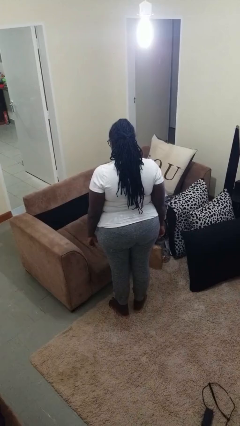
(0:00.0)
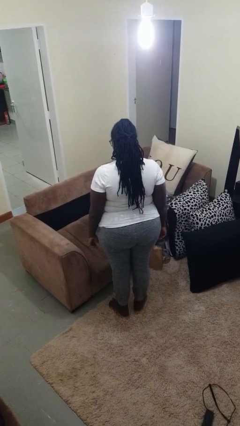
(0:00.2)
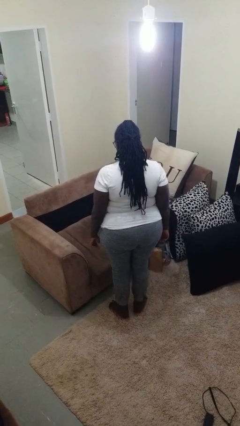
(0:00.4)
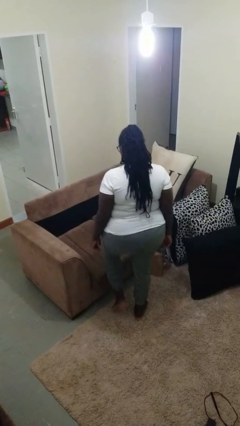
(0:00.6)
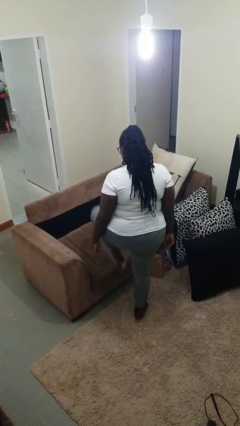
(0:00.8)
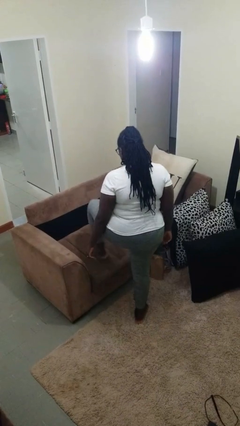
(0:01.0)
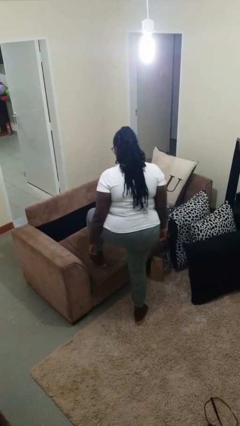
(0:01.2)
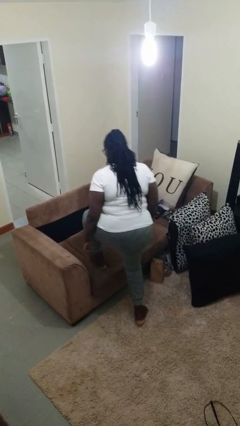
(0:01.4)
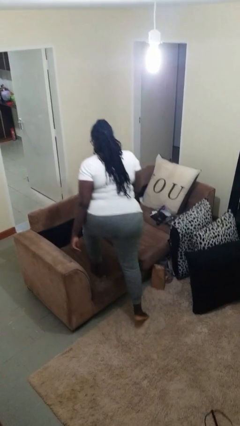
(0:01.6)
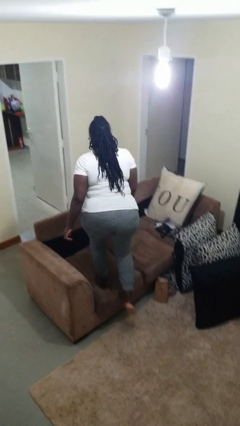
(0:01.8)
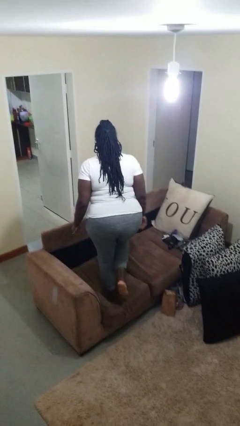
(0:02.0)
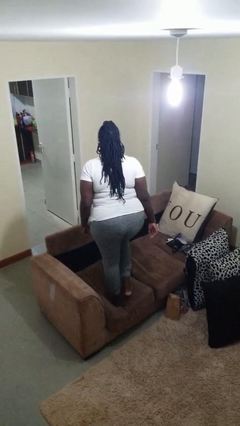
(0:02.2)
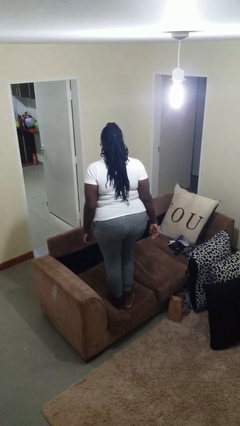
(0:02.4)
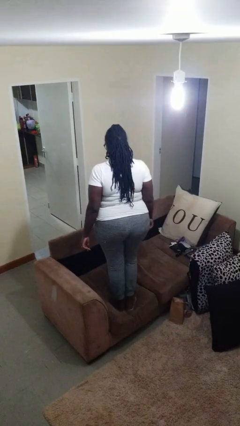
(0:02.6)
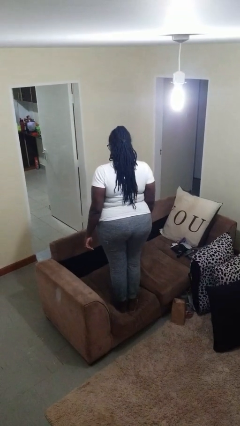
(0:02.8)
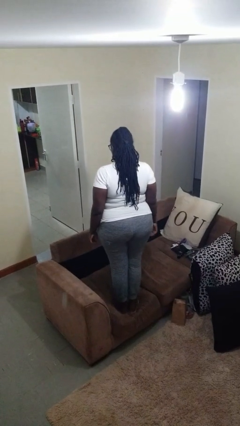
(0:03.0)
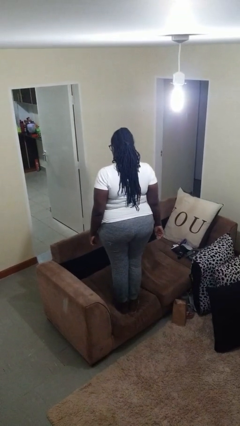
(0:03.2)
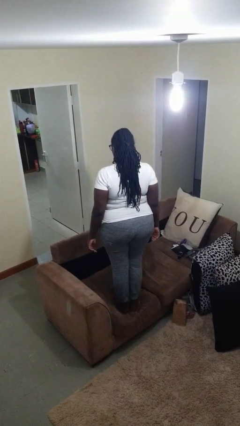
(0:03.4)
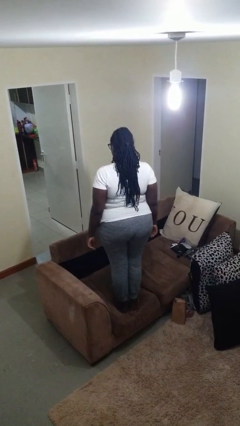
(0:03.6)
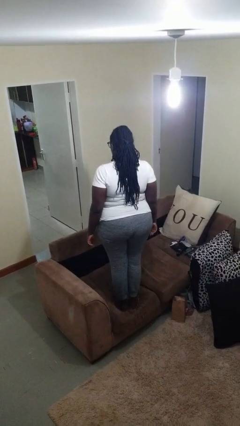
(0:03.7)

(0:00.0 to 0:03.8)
person climbs on couch

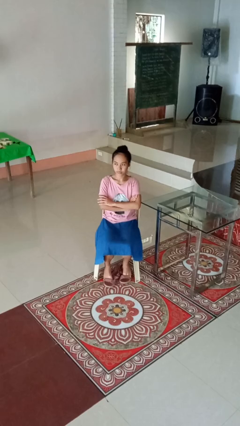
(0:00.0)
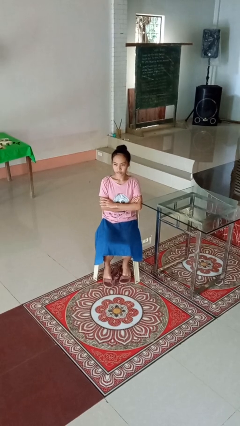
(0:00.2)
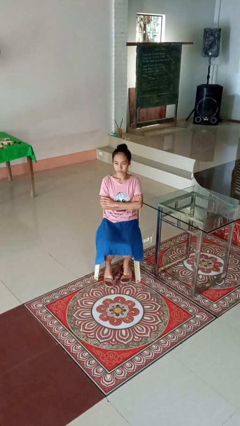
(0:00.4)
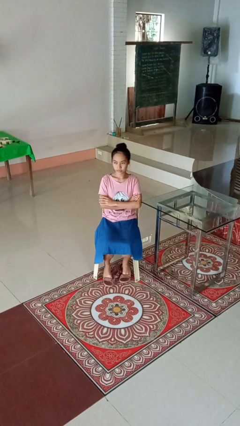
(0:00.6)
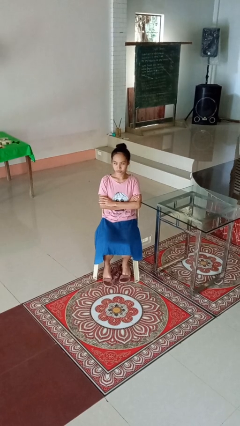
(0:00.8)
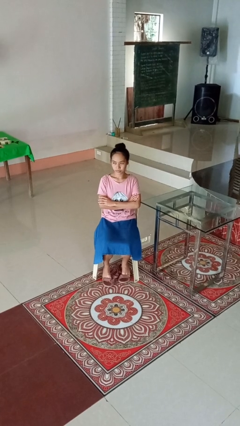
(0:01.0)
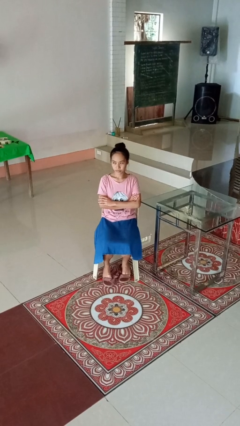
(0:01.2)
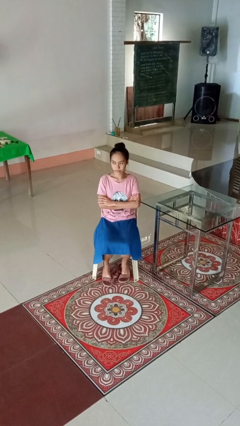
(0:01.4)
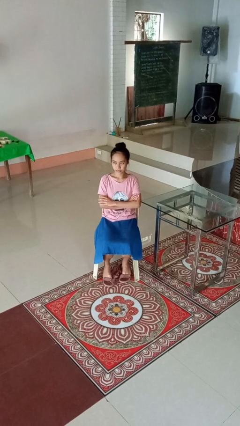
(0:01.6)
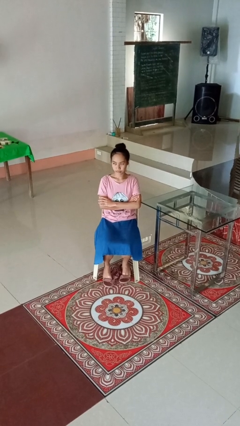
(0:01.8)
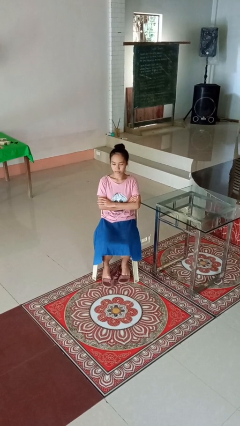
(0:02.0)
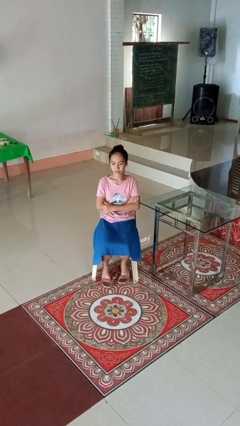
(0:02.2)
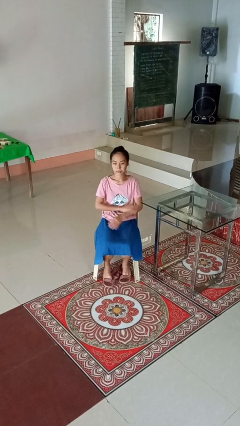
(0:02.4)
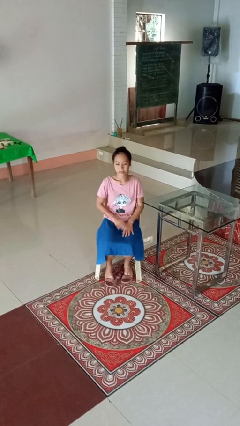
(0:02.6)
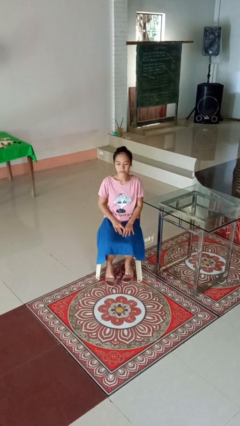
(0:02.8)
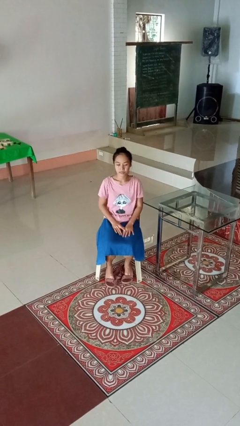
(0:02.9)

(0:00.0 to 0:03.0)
person crosses arms

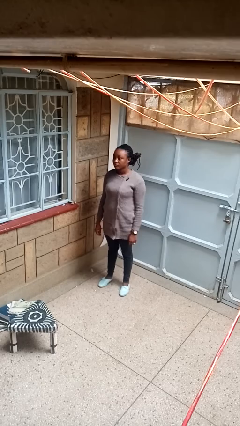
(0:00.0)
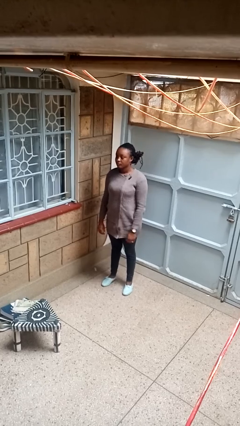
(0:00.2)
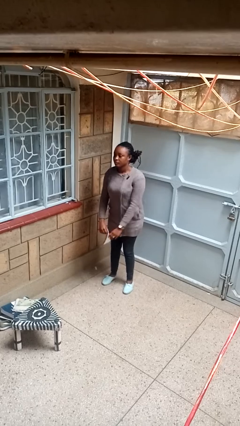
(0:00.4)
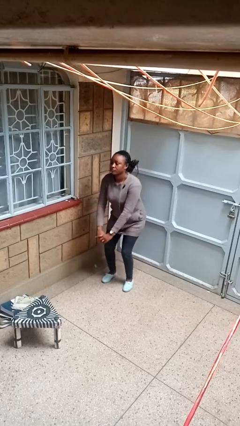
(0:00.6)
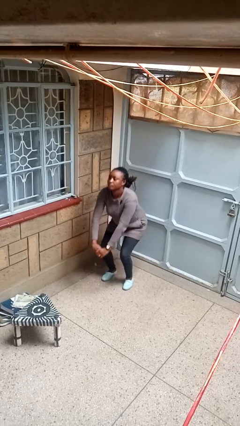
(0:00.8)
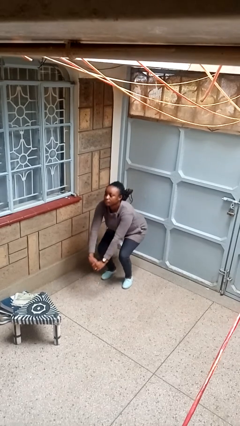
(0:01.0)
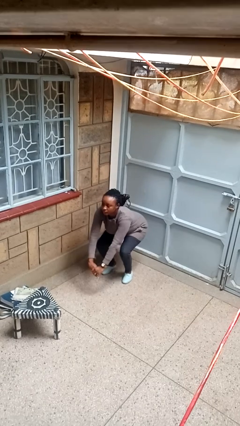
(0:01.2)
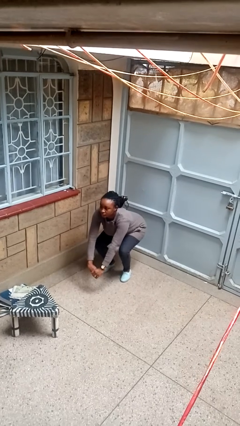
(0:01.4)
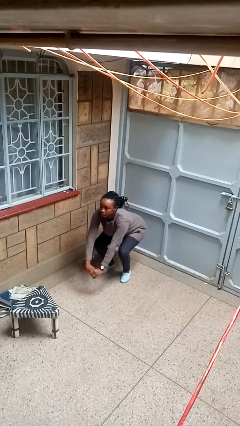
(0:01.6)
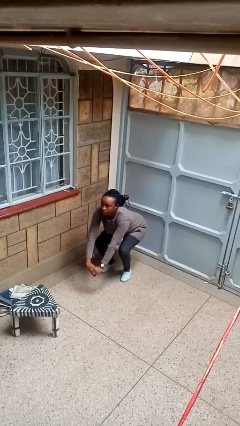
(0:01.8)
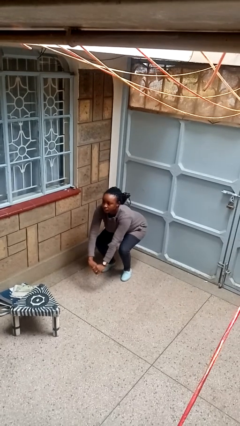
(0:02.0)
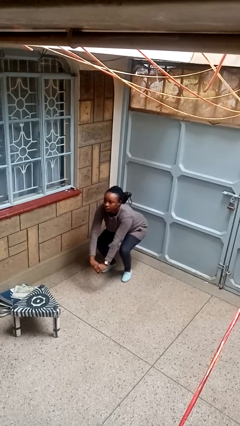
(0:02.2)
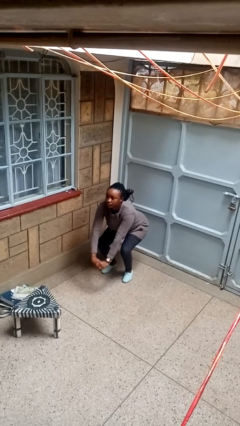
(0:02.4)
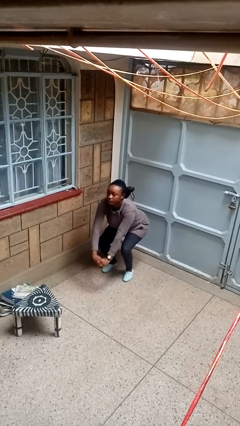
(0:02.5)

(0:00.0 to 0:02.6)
person squats

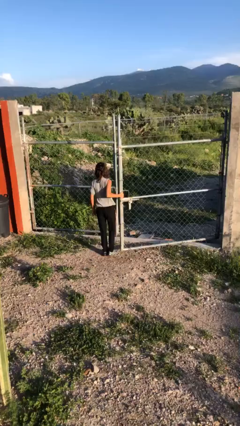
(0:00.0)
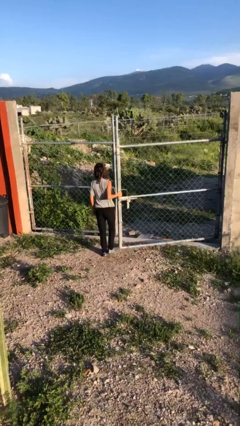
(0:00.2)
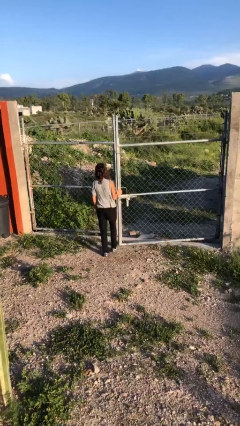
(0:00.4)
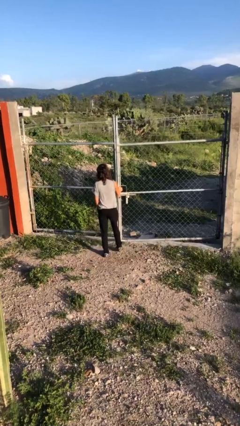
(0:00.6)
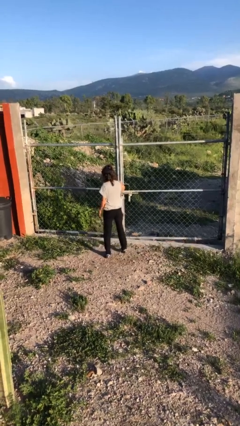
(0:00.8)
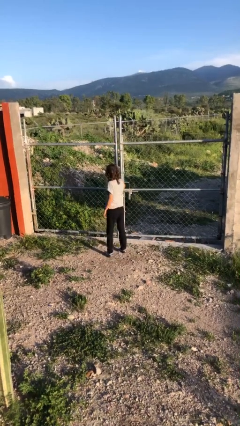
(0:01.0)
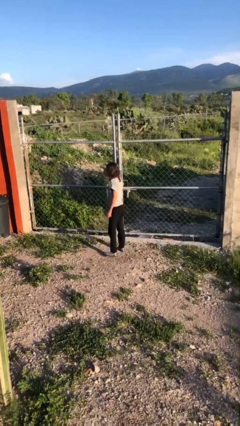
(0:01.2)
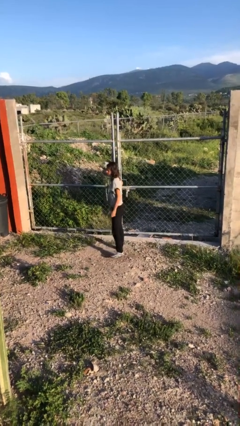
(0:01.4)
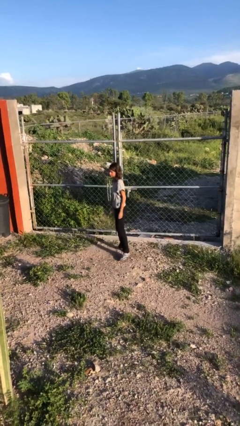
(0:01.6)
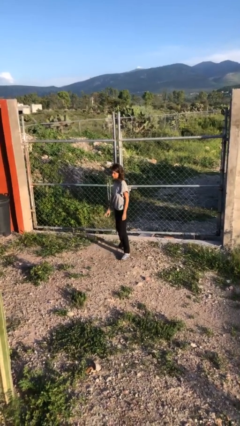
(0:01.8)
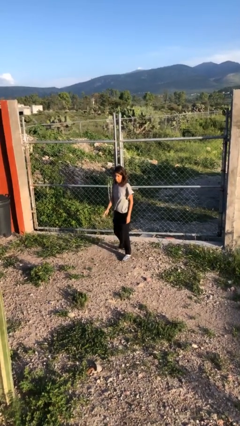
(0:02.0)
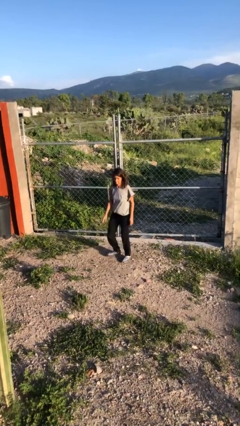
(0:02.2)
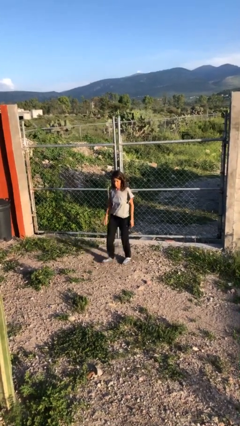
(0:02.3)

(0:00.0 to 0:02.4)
person closes gate

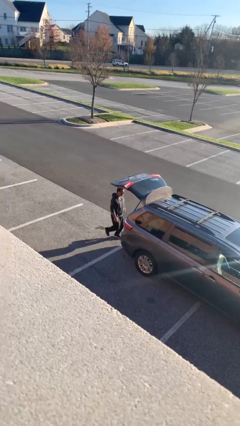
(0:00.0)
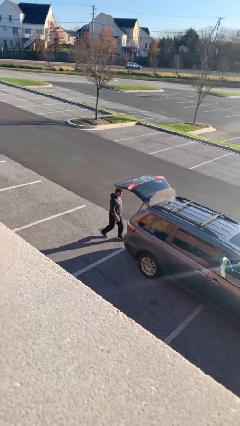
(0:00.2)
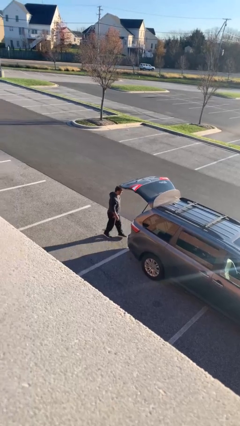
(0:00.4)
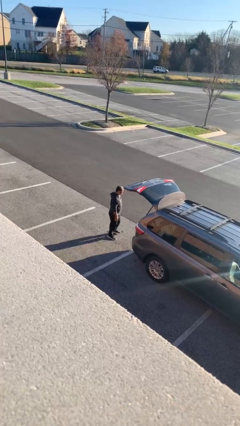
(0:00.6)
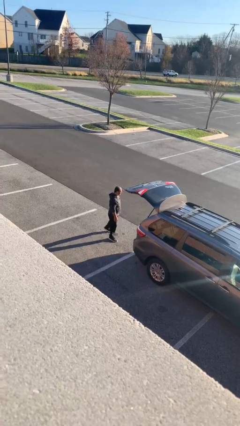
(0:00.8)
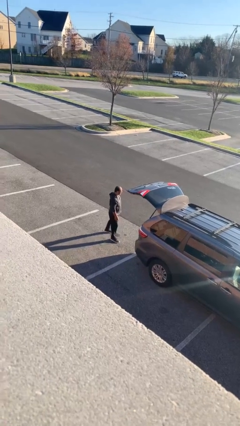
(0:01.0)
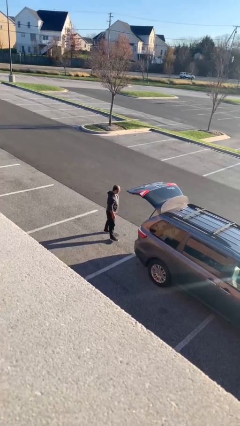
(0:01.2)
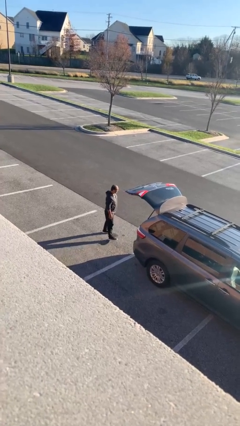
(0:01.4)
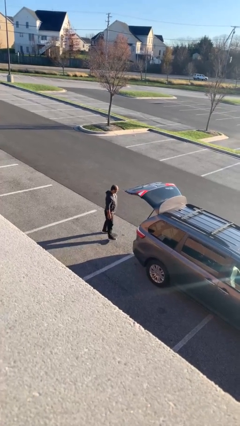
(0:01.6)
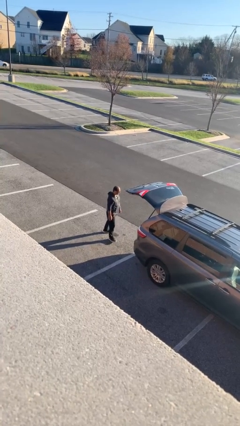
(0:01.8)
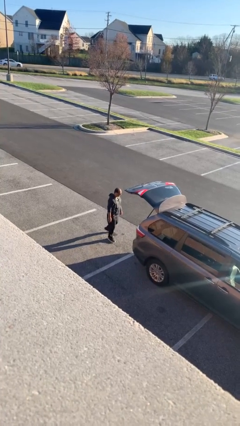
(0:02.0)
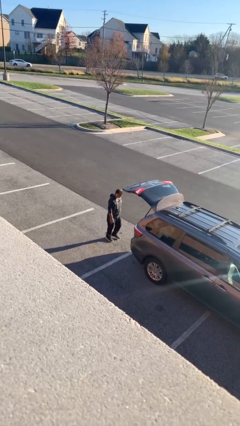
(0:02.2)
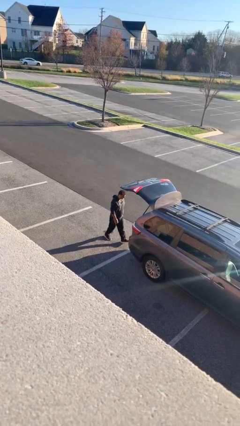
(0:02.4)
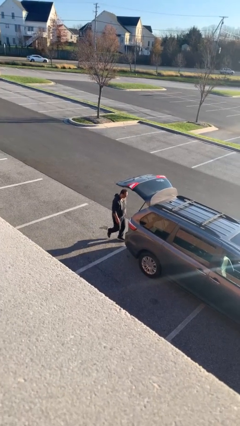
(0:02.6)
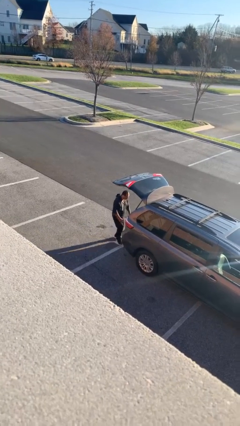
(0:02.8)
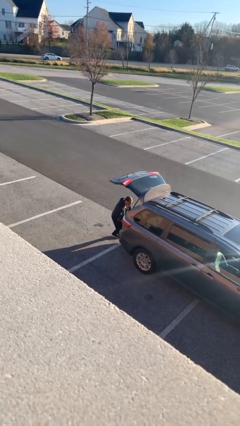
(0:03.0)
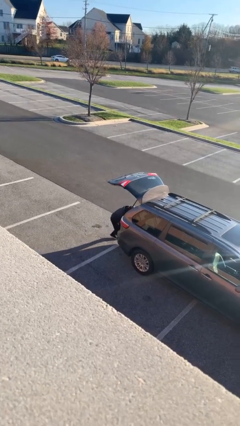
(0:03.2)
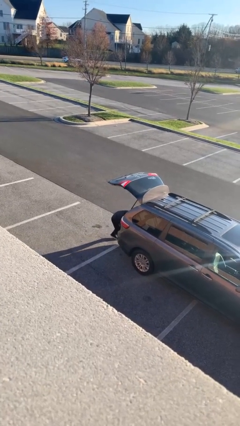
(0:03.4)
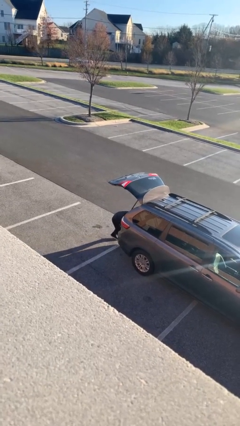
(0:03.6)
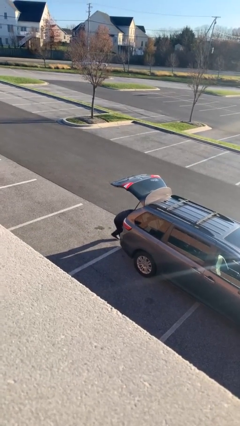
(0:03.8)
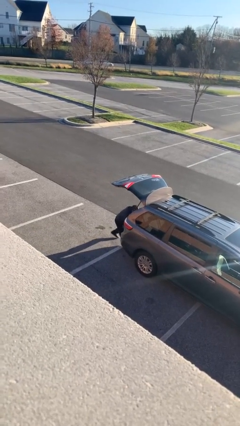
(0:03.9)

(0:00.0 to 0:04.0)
person unloads car

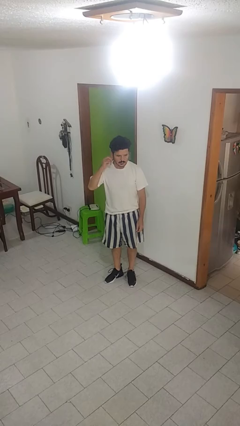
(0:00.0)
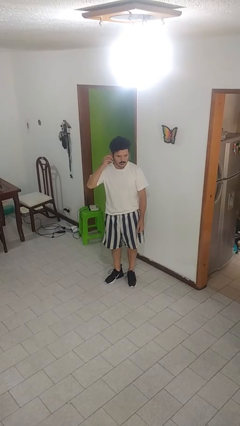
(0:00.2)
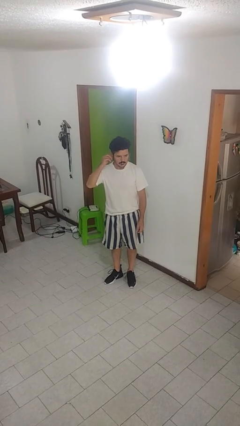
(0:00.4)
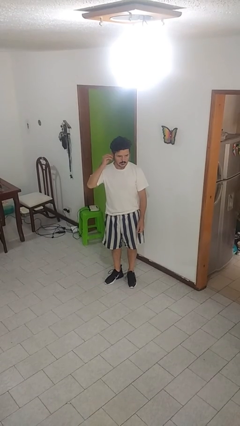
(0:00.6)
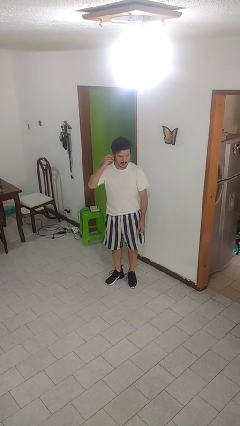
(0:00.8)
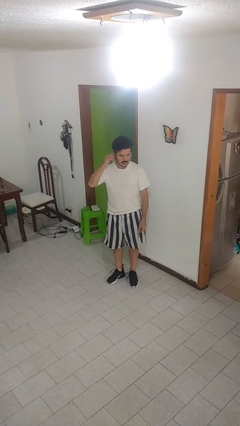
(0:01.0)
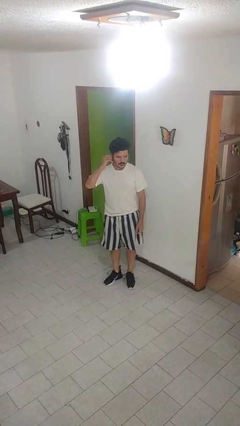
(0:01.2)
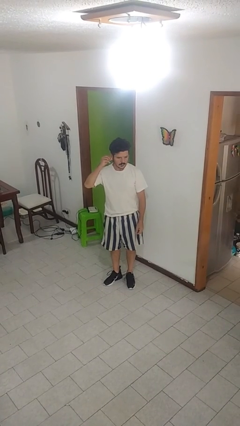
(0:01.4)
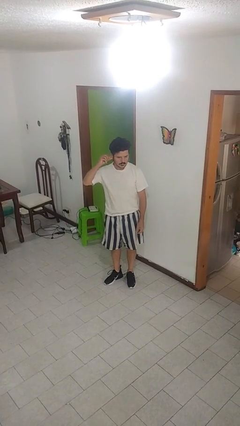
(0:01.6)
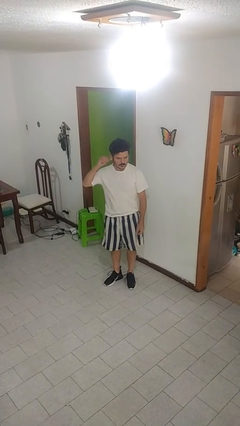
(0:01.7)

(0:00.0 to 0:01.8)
person touches earlobe
